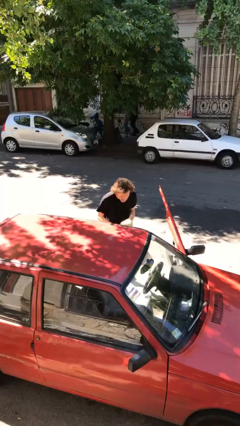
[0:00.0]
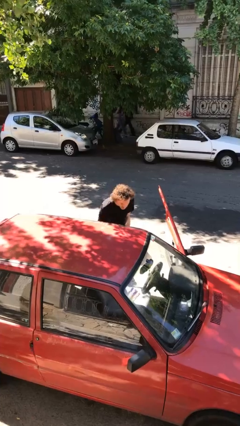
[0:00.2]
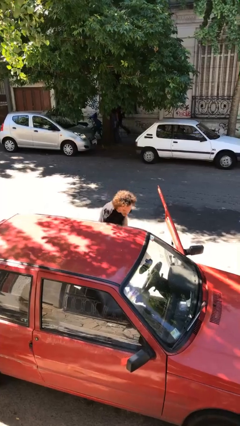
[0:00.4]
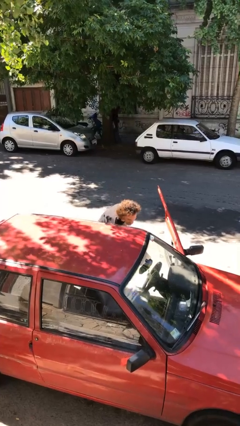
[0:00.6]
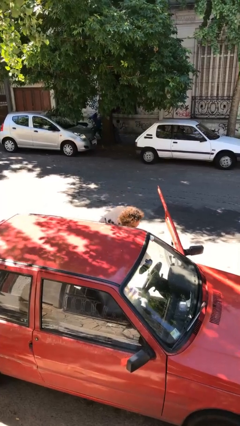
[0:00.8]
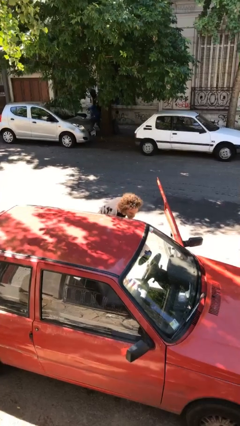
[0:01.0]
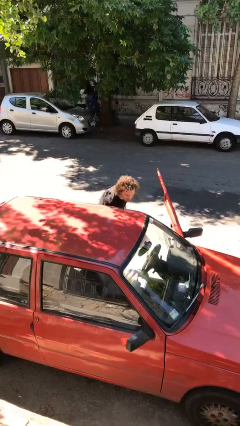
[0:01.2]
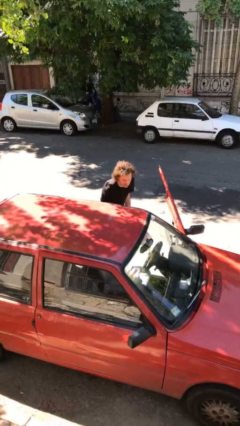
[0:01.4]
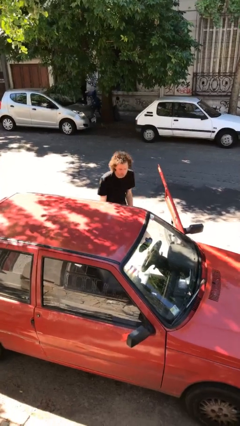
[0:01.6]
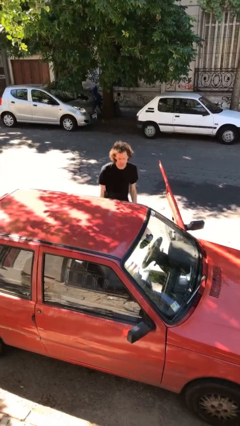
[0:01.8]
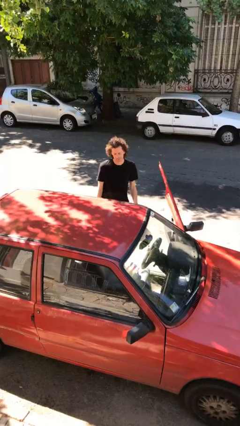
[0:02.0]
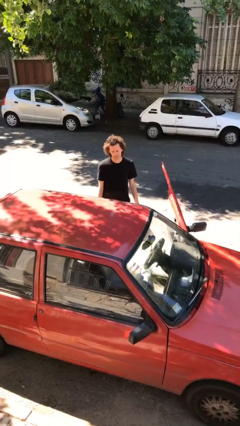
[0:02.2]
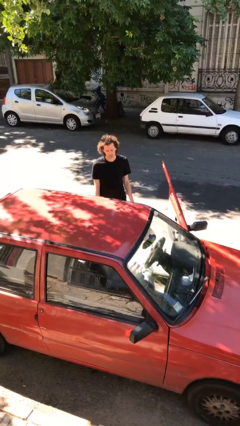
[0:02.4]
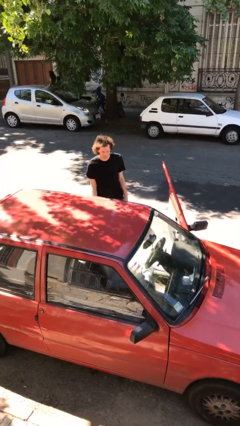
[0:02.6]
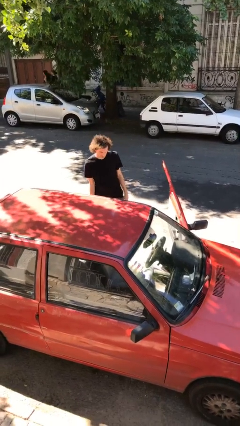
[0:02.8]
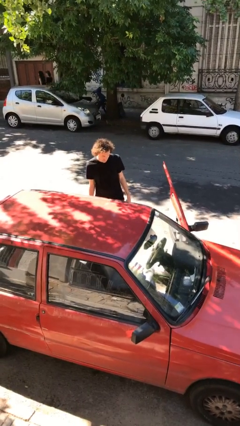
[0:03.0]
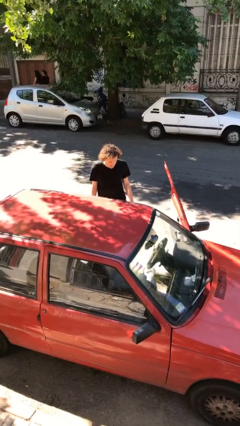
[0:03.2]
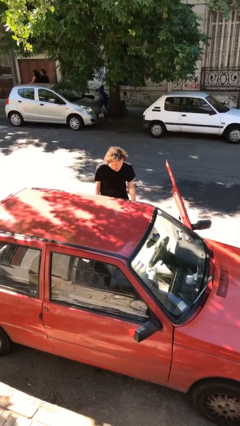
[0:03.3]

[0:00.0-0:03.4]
person loads car

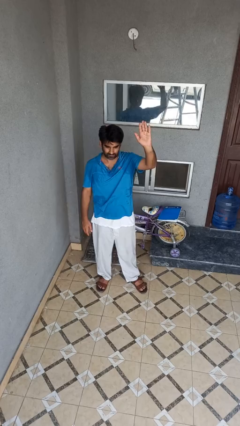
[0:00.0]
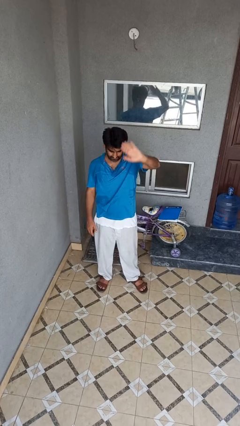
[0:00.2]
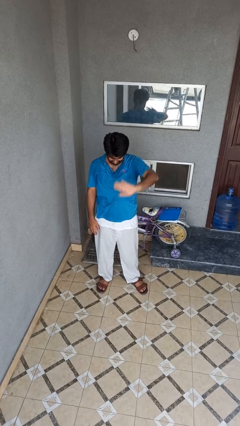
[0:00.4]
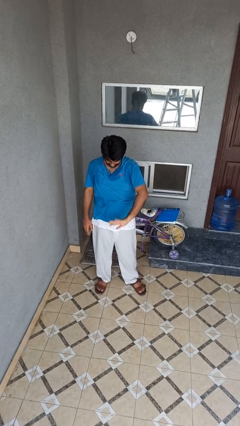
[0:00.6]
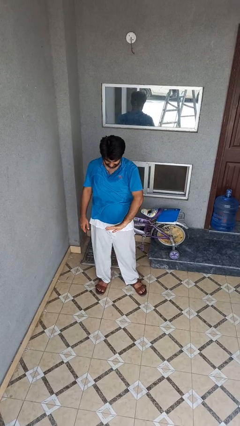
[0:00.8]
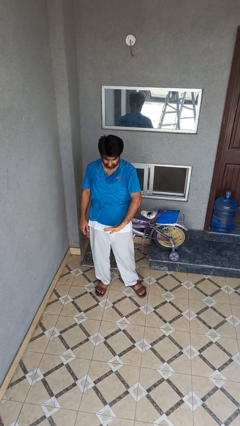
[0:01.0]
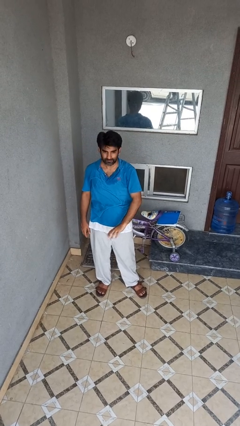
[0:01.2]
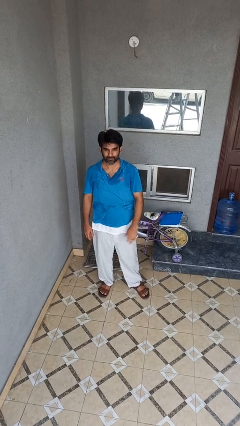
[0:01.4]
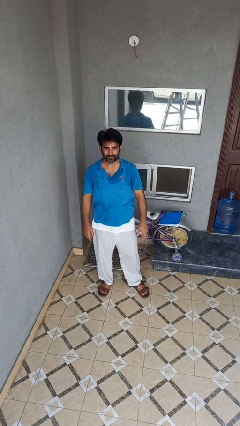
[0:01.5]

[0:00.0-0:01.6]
person gestures swipe down

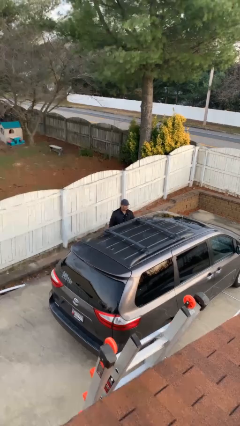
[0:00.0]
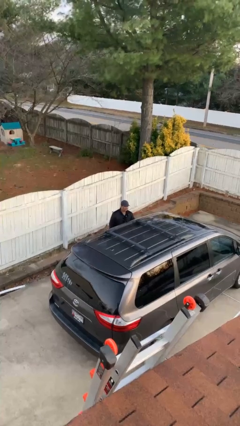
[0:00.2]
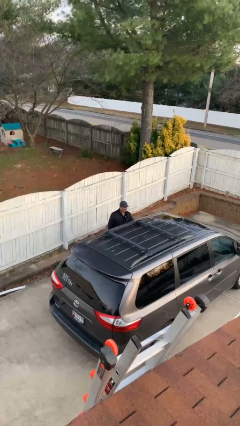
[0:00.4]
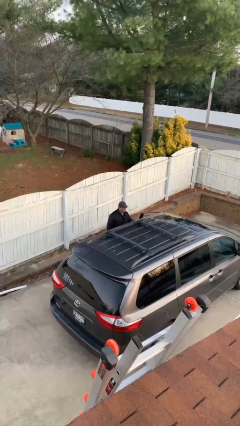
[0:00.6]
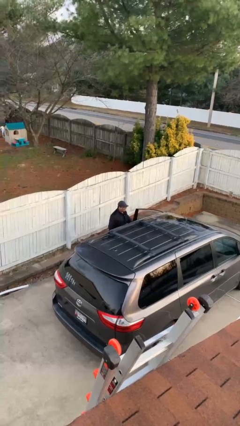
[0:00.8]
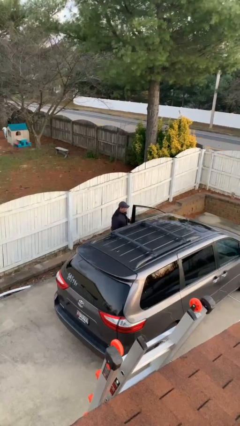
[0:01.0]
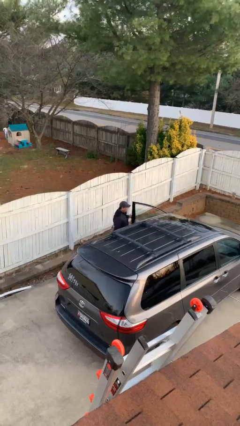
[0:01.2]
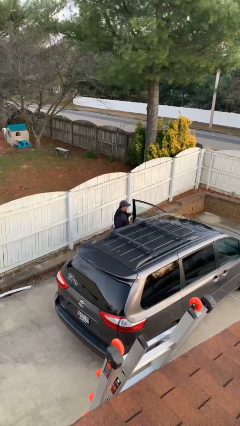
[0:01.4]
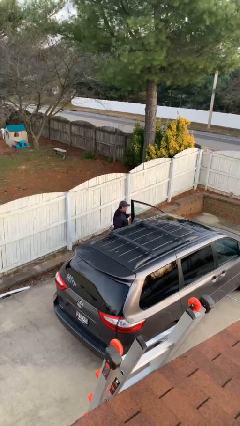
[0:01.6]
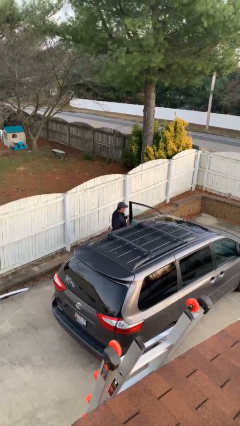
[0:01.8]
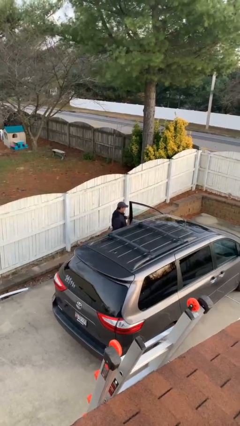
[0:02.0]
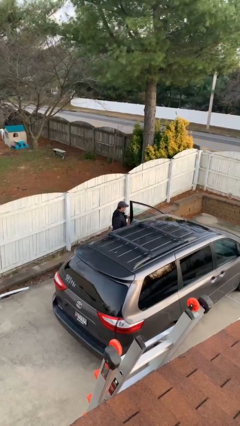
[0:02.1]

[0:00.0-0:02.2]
person opens car door

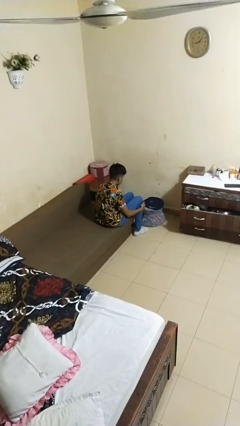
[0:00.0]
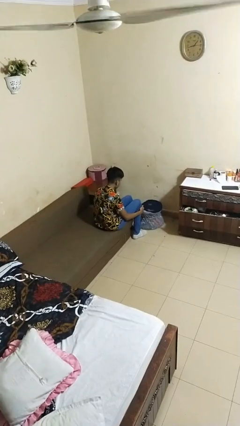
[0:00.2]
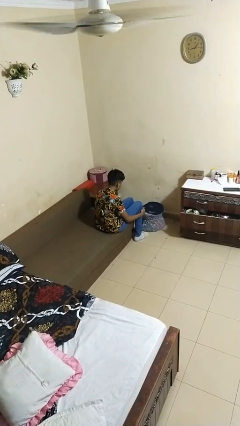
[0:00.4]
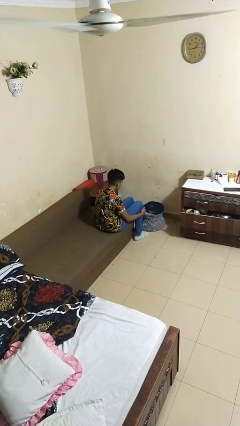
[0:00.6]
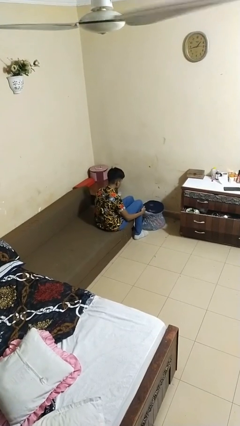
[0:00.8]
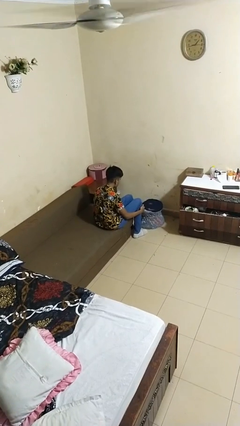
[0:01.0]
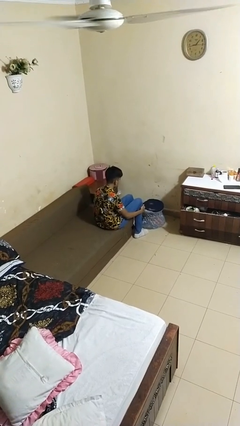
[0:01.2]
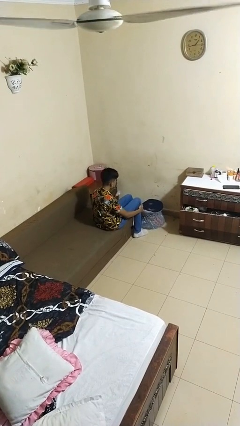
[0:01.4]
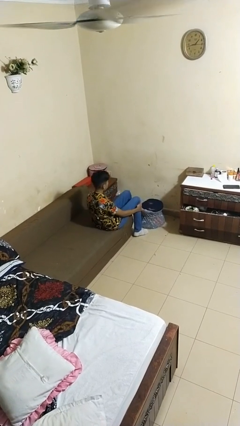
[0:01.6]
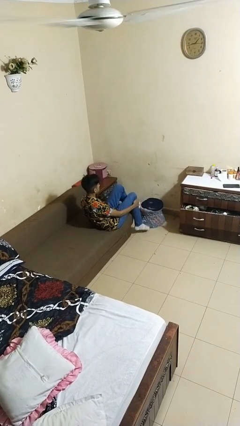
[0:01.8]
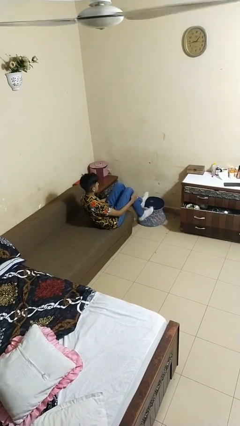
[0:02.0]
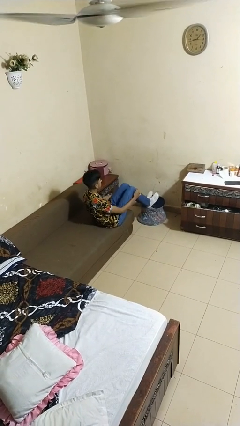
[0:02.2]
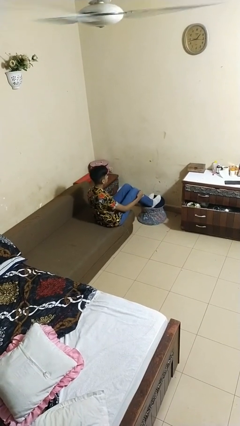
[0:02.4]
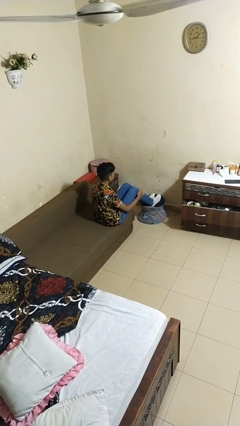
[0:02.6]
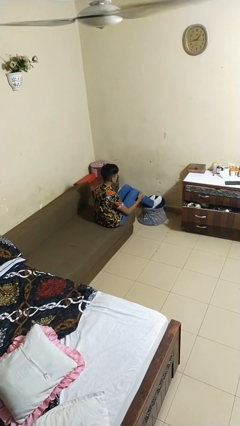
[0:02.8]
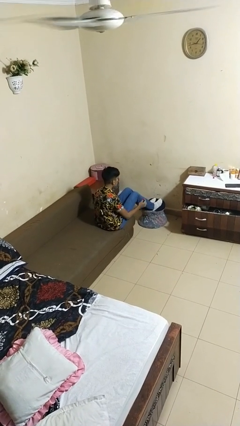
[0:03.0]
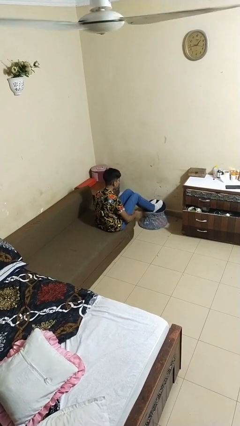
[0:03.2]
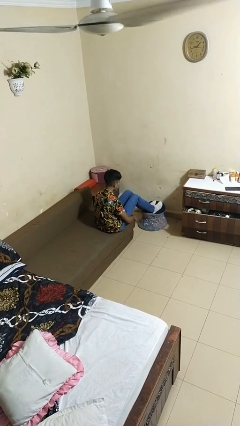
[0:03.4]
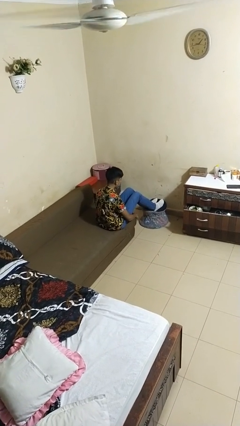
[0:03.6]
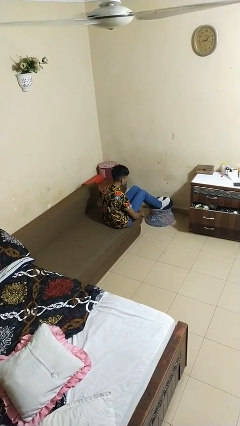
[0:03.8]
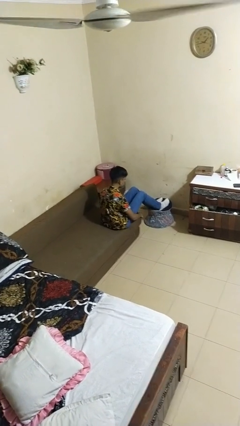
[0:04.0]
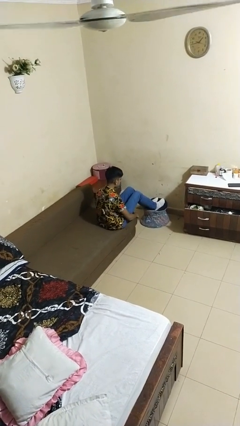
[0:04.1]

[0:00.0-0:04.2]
person puts feet up

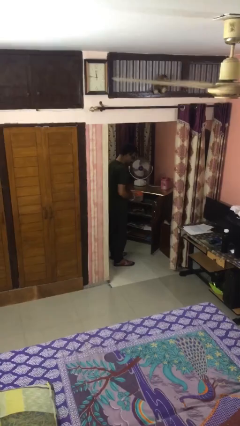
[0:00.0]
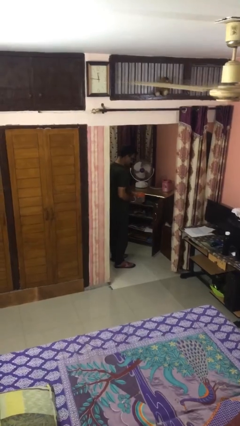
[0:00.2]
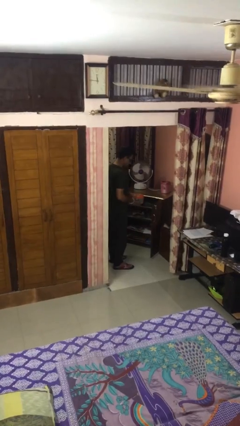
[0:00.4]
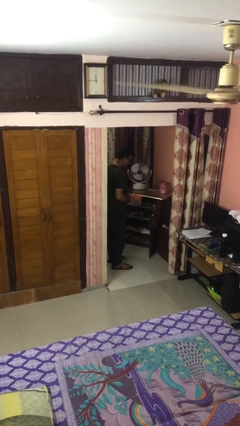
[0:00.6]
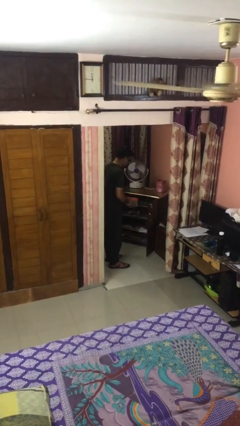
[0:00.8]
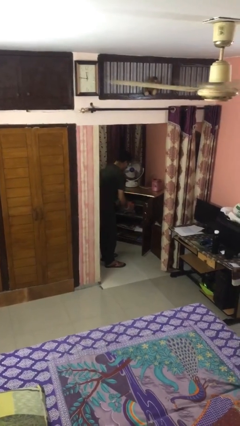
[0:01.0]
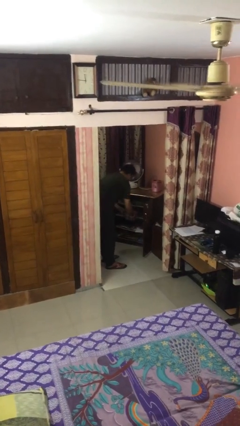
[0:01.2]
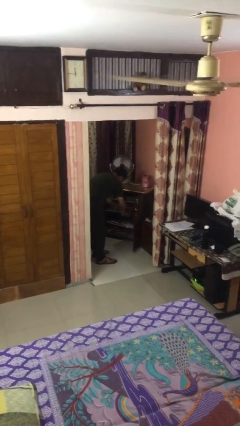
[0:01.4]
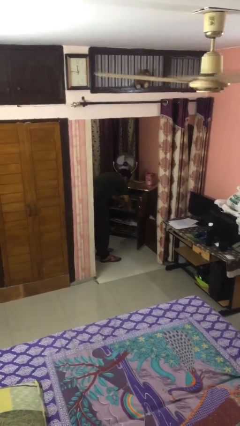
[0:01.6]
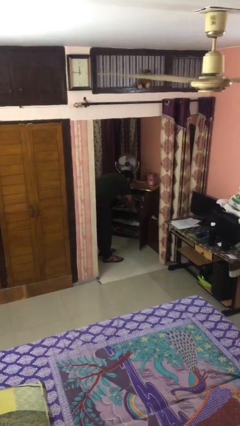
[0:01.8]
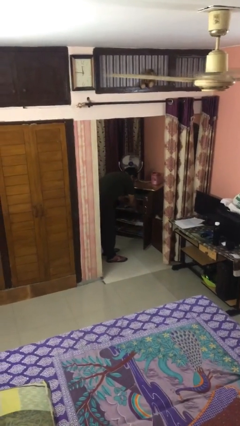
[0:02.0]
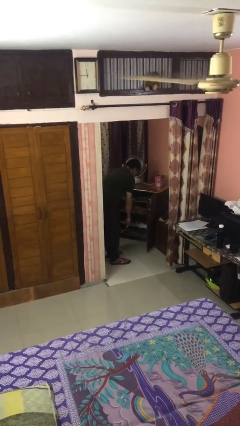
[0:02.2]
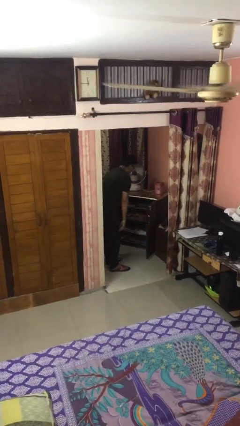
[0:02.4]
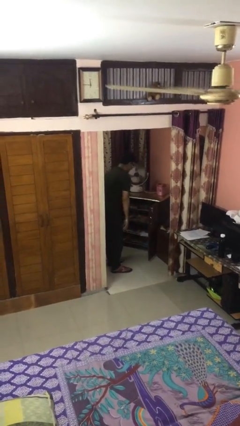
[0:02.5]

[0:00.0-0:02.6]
person puts down object into cabinet

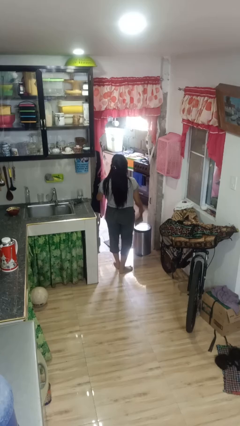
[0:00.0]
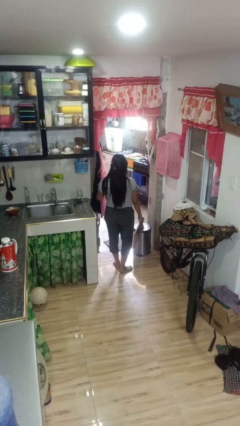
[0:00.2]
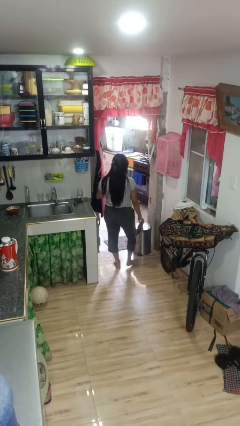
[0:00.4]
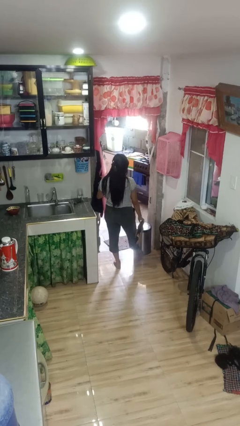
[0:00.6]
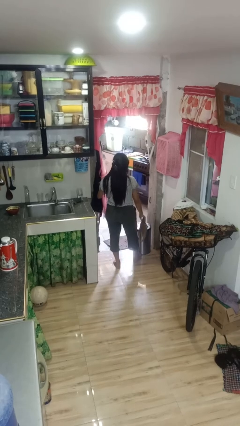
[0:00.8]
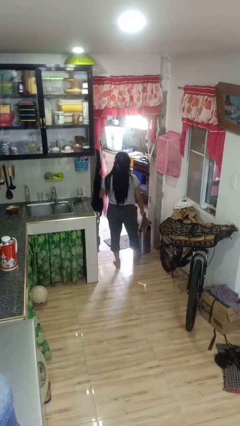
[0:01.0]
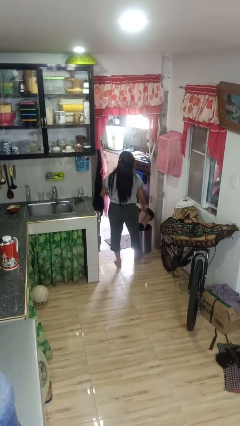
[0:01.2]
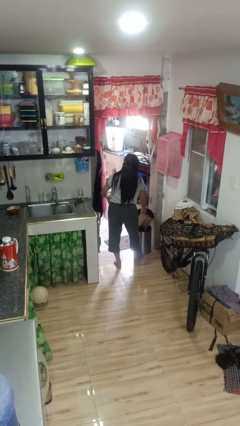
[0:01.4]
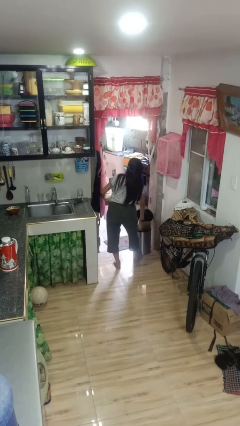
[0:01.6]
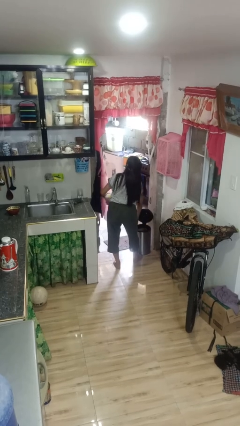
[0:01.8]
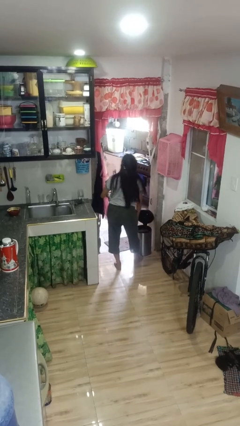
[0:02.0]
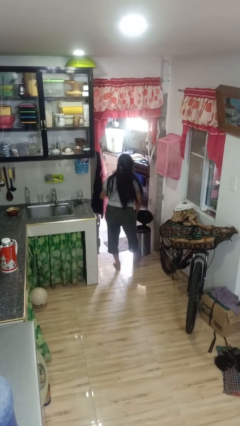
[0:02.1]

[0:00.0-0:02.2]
person discards trash

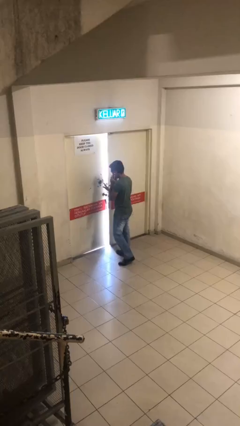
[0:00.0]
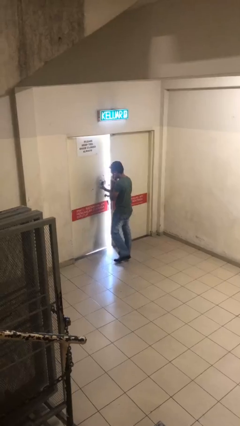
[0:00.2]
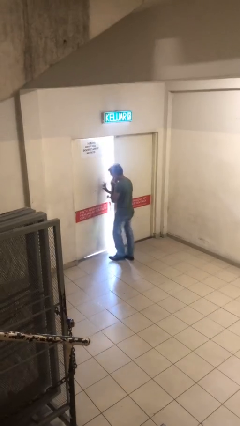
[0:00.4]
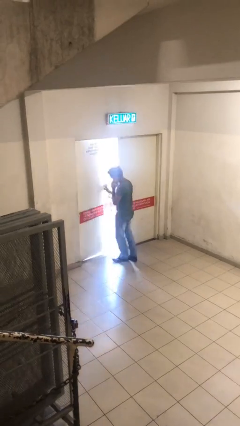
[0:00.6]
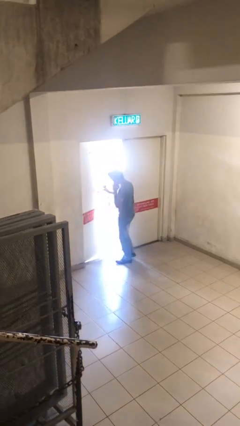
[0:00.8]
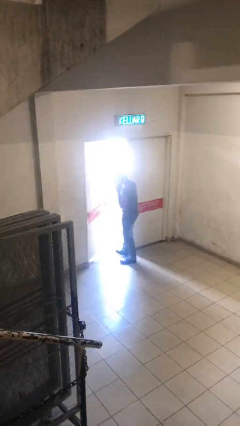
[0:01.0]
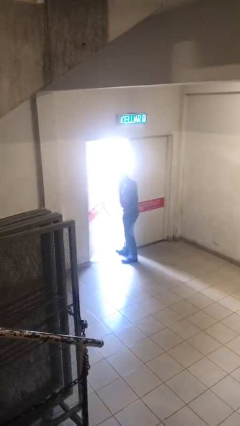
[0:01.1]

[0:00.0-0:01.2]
person opens facility door
